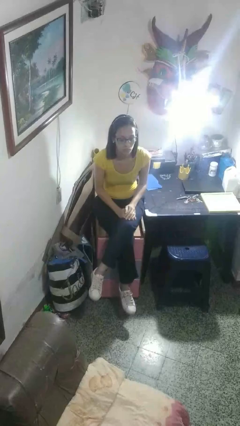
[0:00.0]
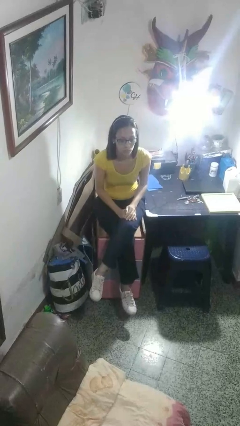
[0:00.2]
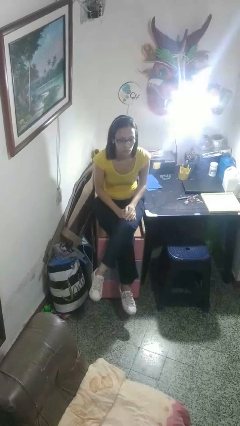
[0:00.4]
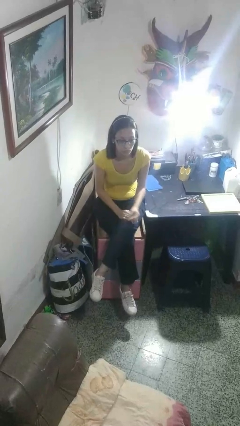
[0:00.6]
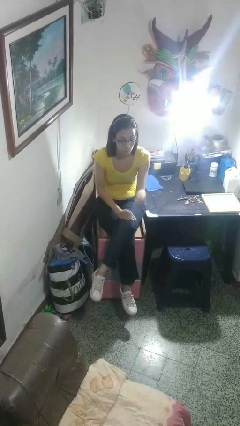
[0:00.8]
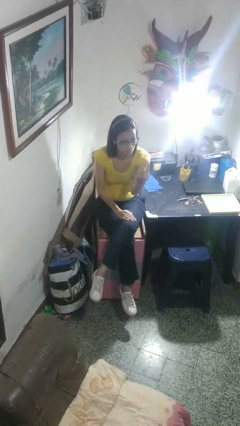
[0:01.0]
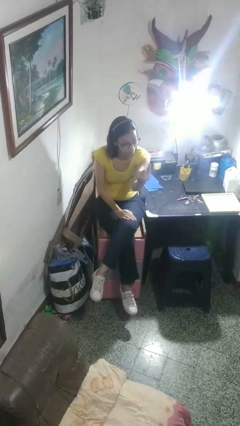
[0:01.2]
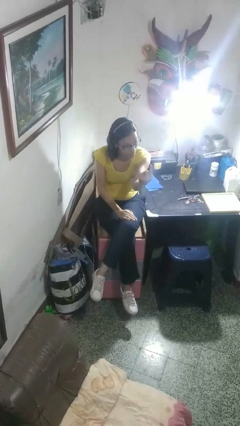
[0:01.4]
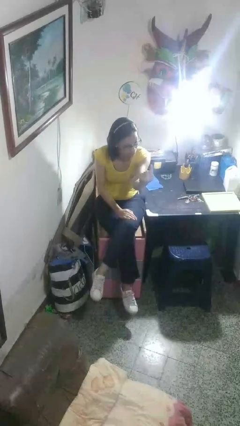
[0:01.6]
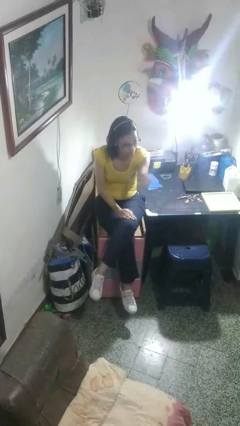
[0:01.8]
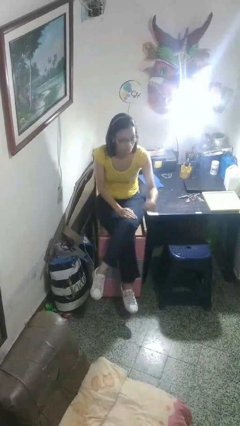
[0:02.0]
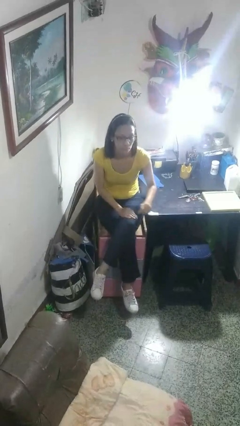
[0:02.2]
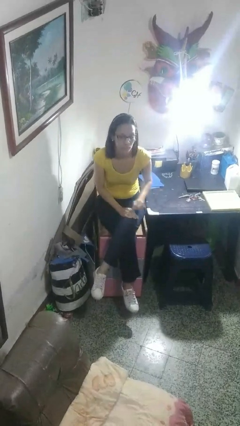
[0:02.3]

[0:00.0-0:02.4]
person gestures number one

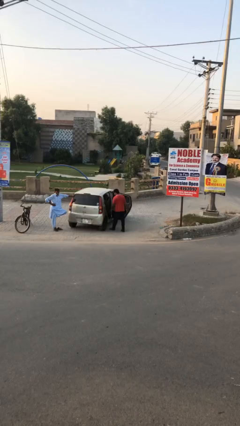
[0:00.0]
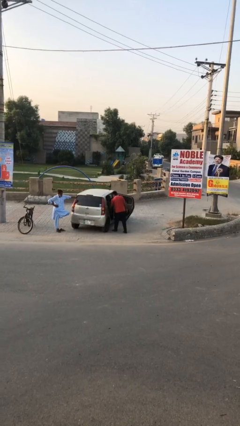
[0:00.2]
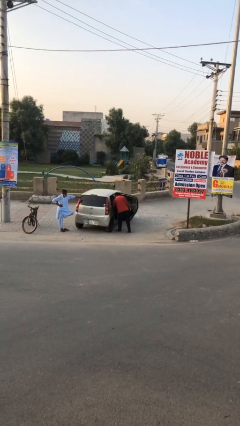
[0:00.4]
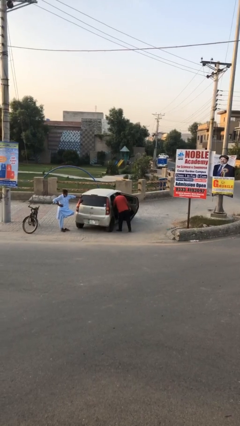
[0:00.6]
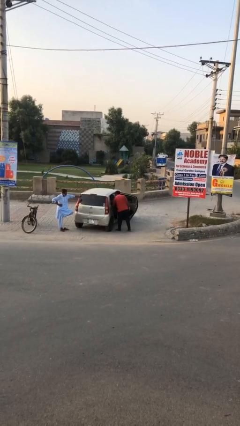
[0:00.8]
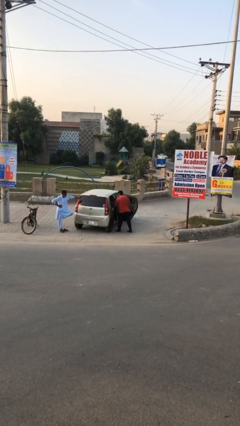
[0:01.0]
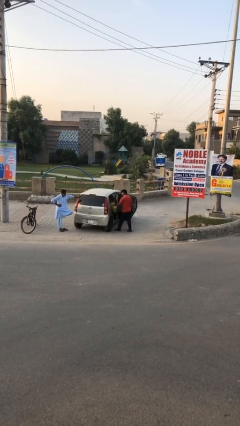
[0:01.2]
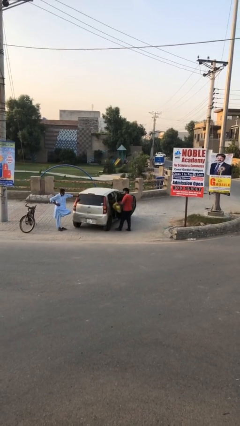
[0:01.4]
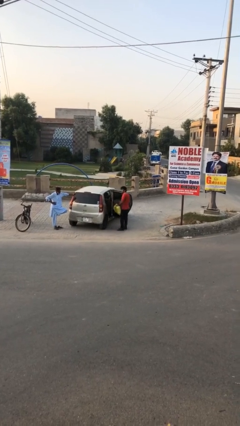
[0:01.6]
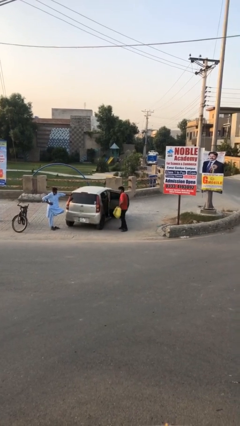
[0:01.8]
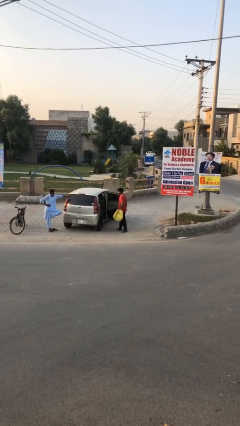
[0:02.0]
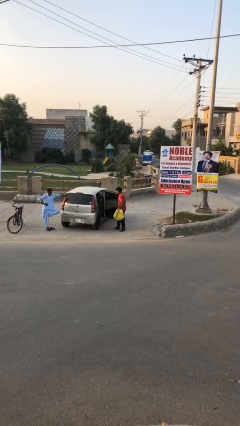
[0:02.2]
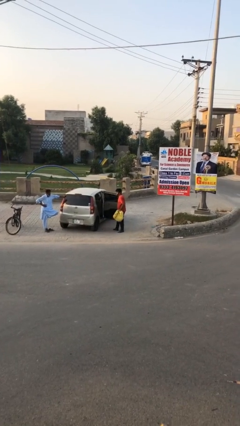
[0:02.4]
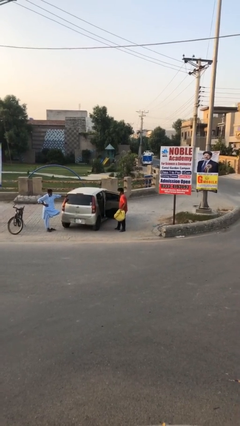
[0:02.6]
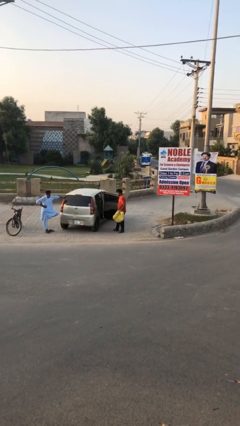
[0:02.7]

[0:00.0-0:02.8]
person unloads car

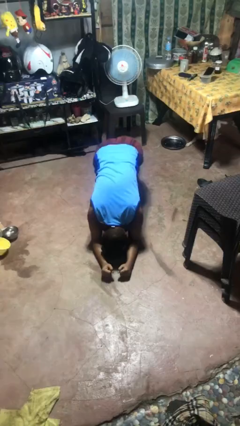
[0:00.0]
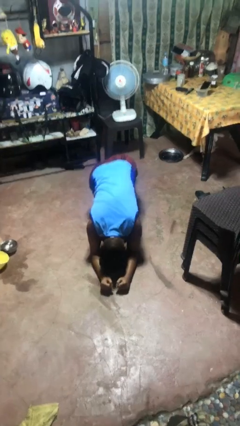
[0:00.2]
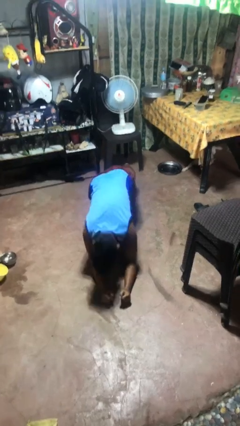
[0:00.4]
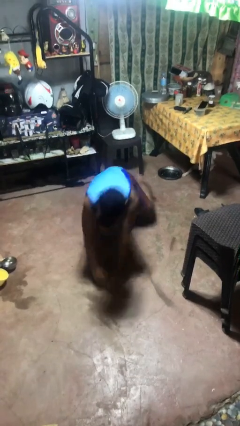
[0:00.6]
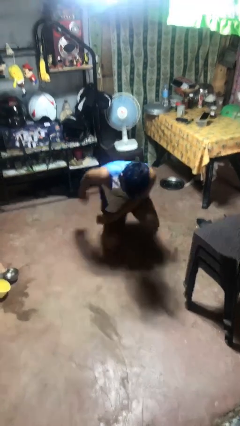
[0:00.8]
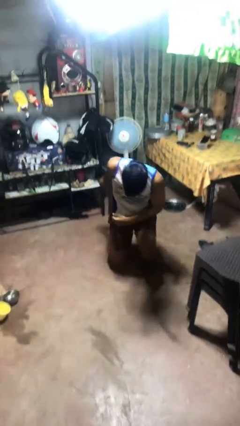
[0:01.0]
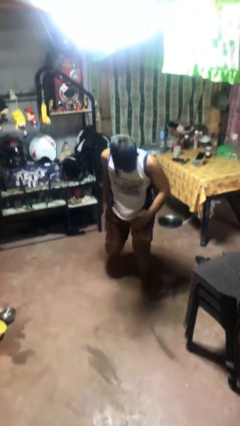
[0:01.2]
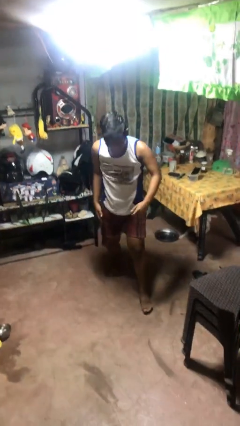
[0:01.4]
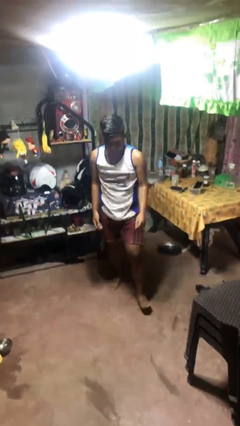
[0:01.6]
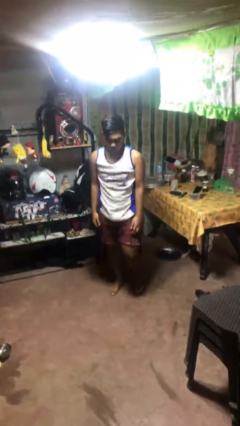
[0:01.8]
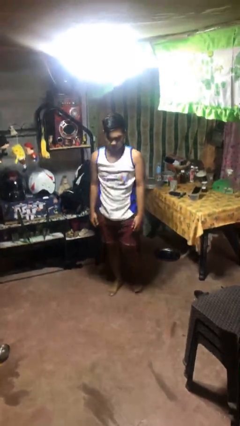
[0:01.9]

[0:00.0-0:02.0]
person stands up from floor

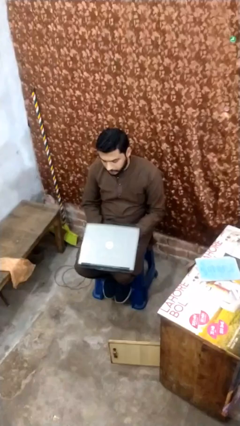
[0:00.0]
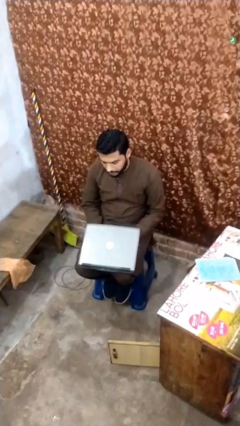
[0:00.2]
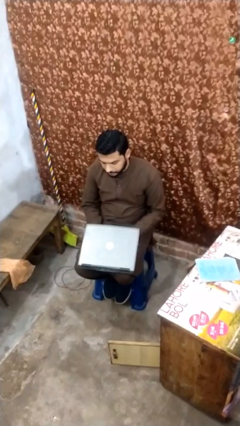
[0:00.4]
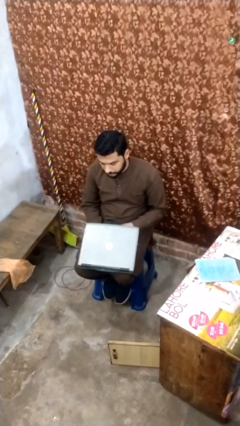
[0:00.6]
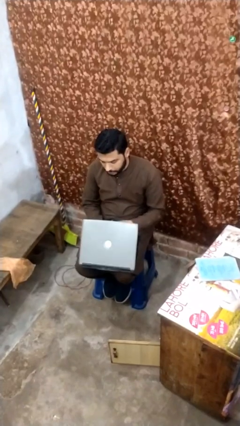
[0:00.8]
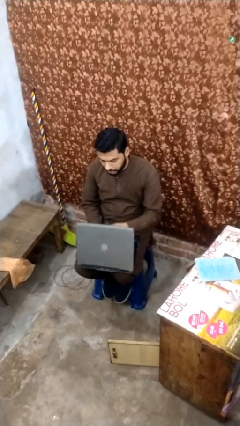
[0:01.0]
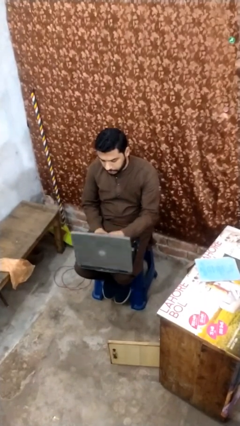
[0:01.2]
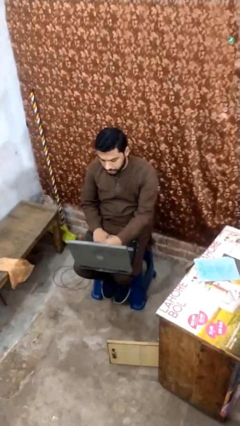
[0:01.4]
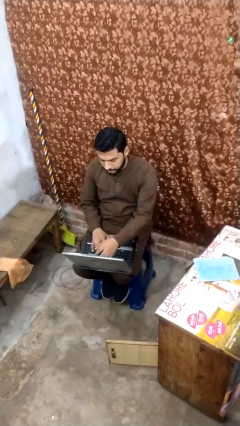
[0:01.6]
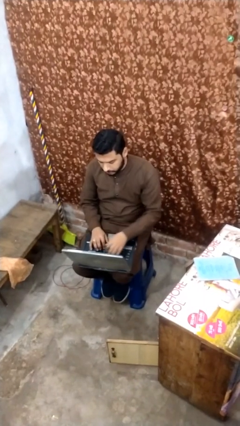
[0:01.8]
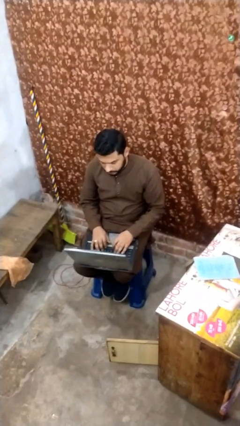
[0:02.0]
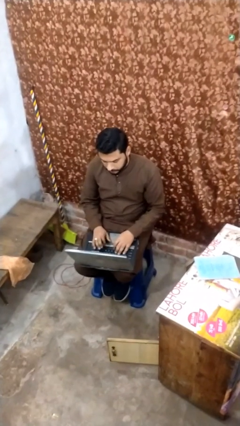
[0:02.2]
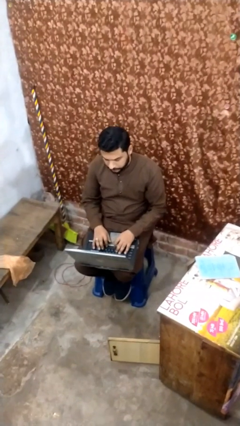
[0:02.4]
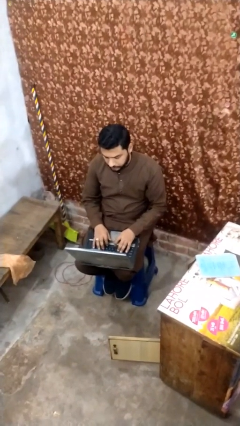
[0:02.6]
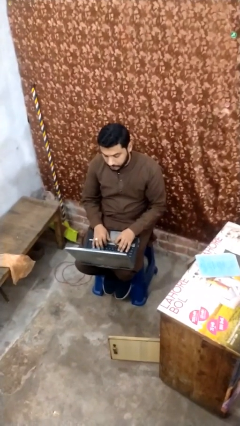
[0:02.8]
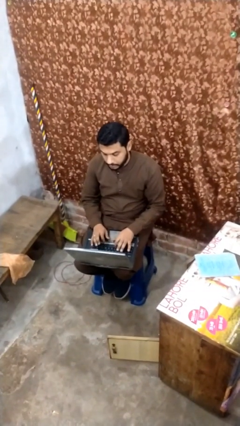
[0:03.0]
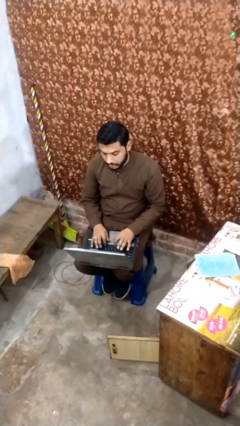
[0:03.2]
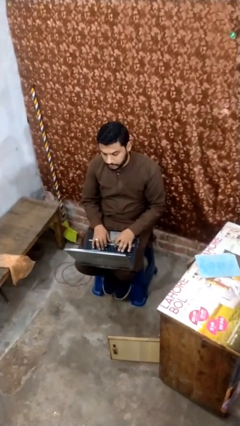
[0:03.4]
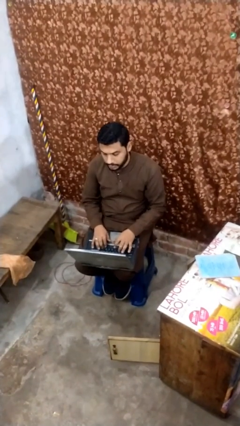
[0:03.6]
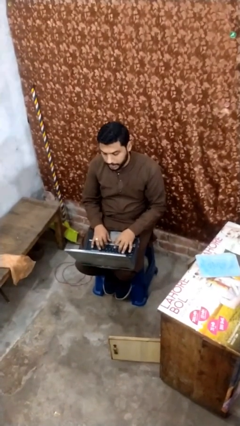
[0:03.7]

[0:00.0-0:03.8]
person interacts with laptop

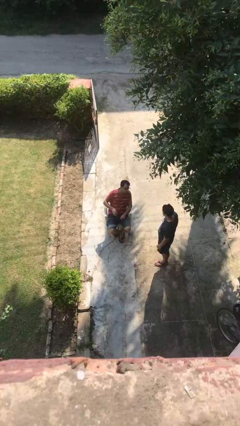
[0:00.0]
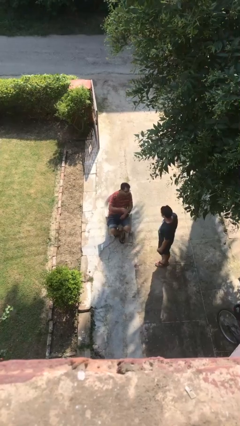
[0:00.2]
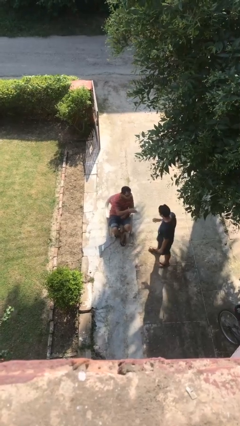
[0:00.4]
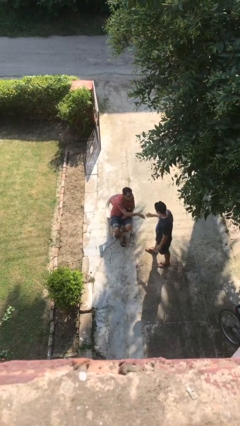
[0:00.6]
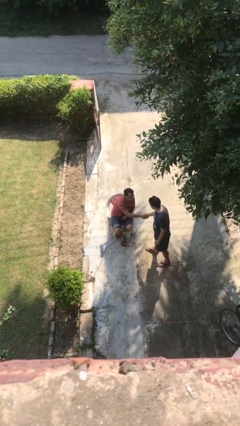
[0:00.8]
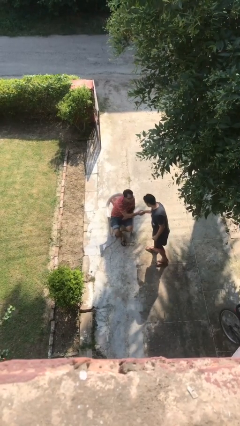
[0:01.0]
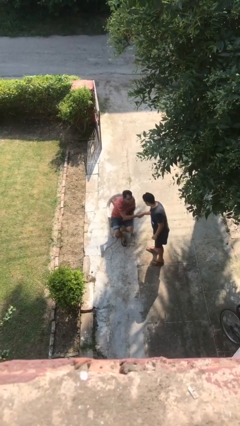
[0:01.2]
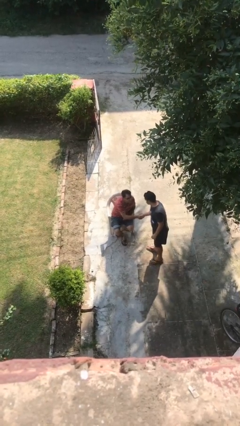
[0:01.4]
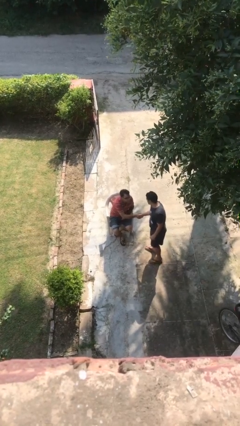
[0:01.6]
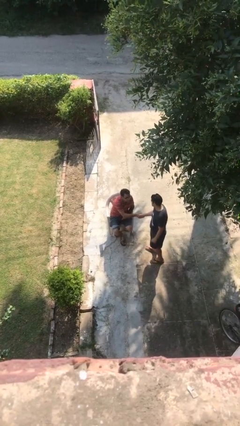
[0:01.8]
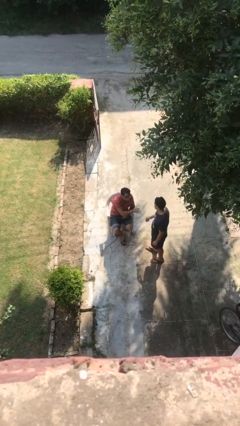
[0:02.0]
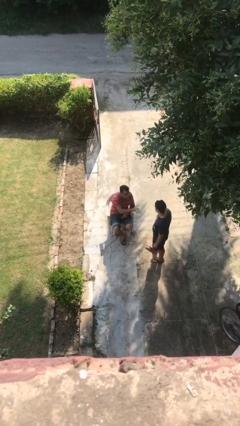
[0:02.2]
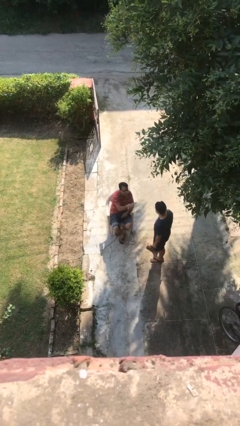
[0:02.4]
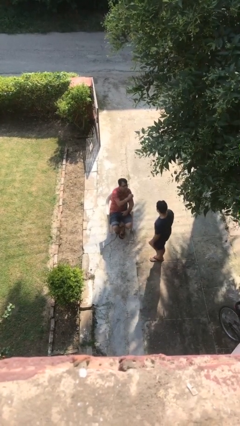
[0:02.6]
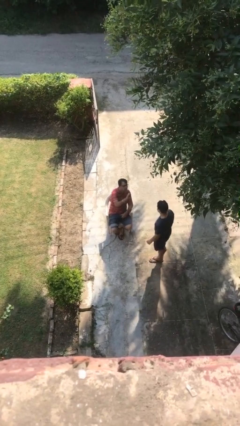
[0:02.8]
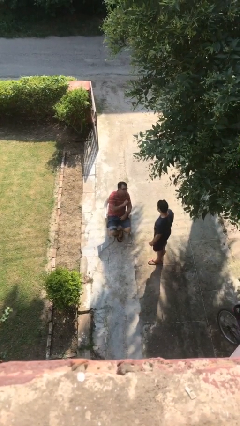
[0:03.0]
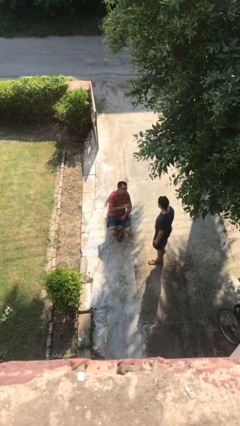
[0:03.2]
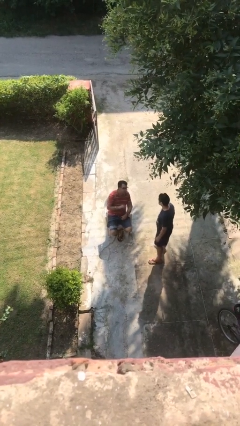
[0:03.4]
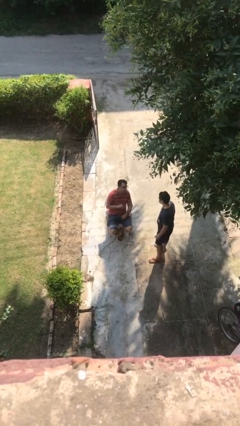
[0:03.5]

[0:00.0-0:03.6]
person shakes hand

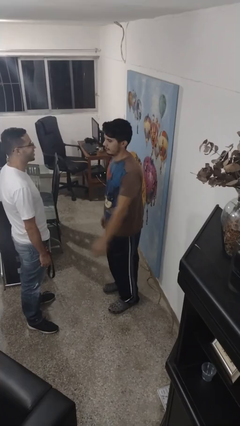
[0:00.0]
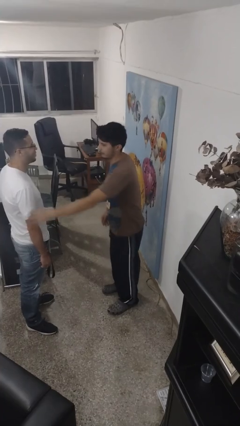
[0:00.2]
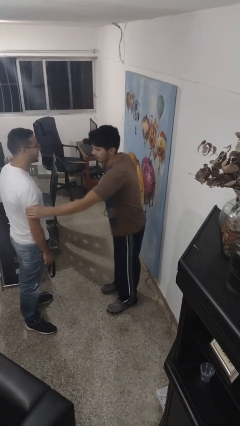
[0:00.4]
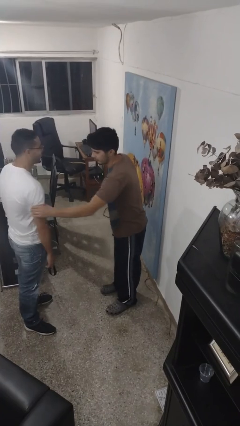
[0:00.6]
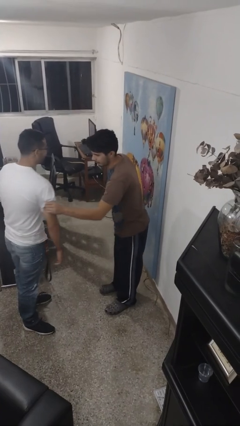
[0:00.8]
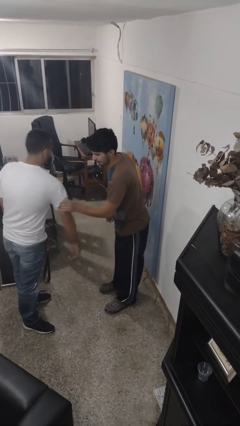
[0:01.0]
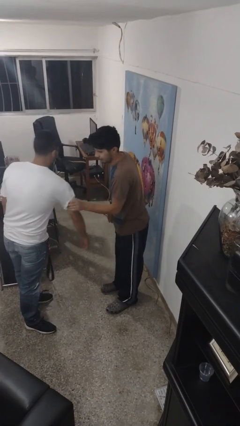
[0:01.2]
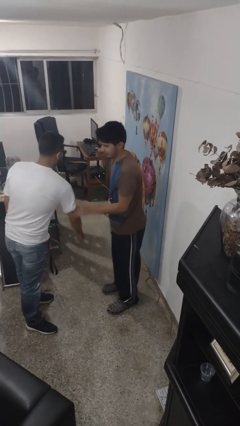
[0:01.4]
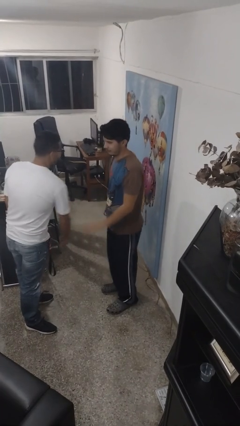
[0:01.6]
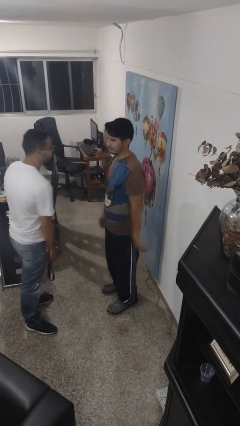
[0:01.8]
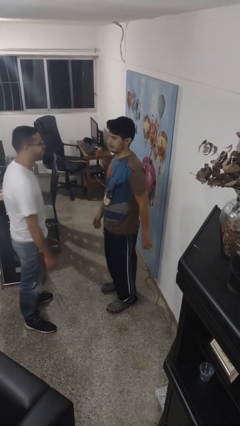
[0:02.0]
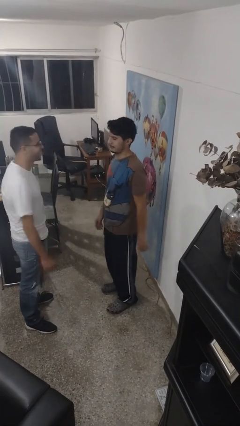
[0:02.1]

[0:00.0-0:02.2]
person grabs person by bicep

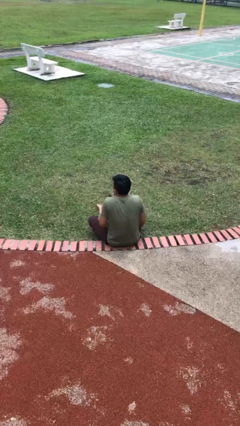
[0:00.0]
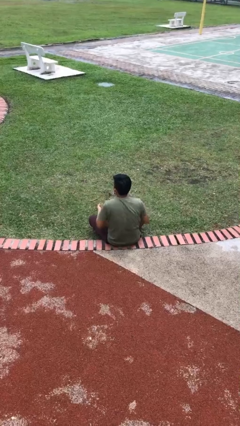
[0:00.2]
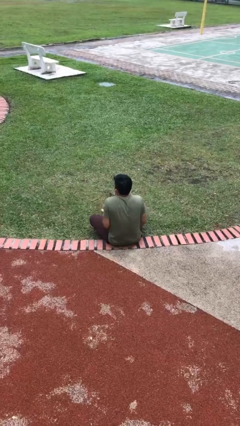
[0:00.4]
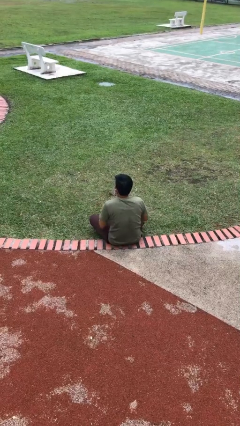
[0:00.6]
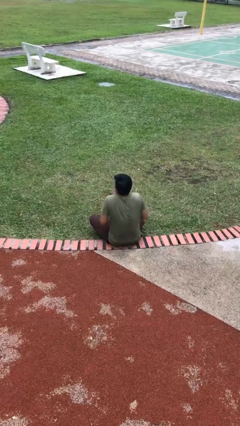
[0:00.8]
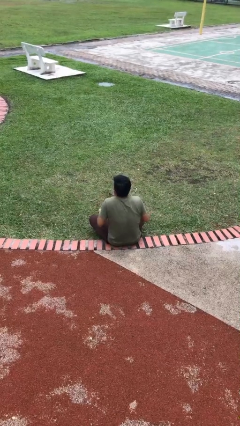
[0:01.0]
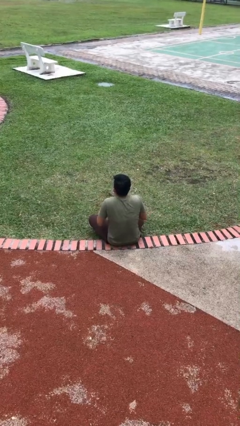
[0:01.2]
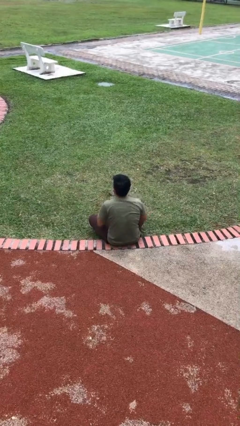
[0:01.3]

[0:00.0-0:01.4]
person shrugs
